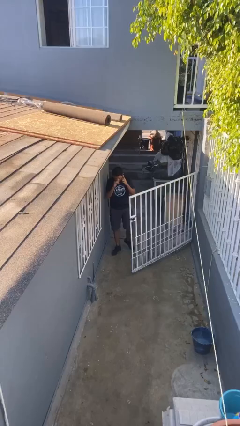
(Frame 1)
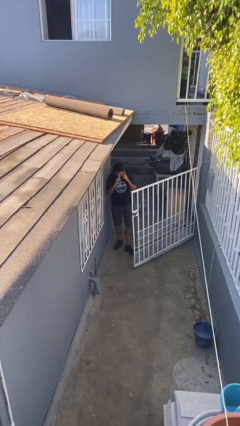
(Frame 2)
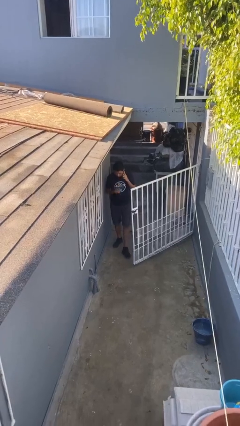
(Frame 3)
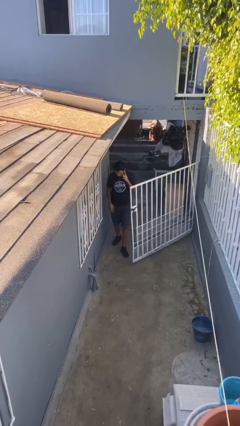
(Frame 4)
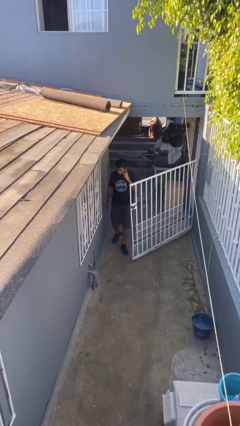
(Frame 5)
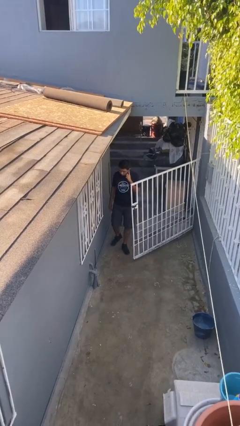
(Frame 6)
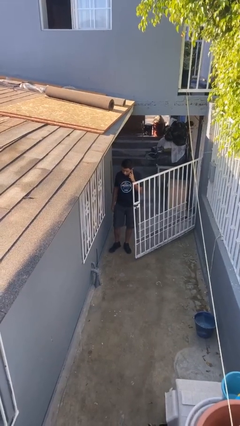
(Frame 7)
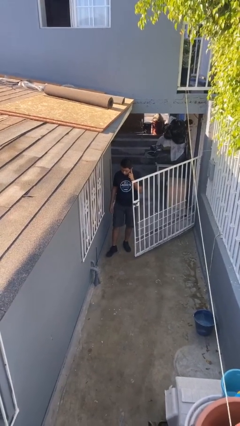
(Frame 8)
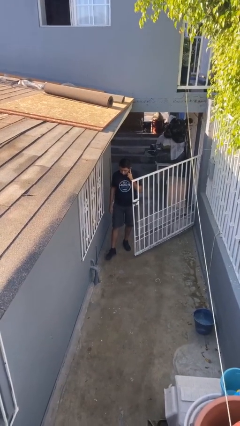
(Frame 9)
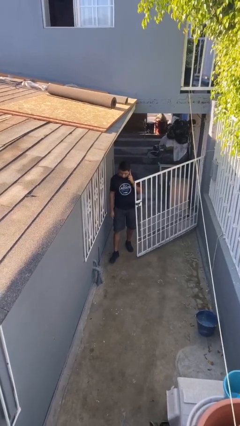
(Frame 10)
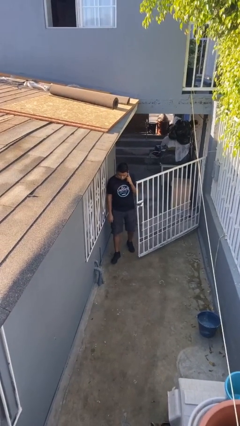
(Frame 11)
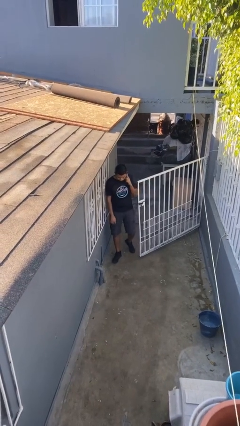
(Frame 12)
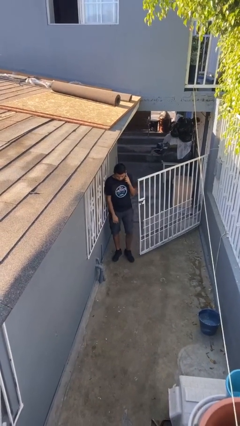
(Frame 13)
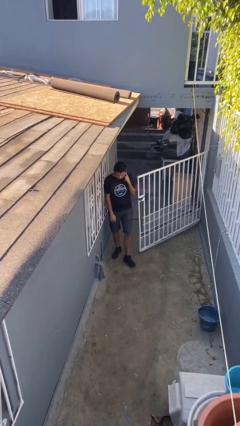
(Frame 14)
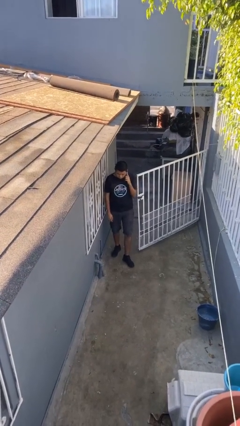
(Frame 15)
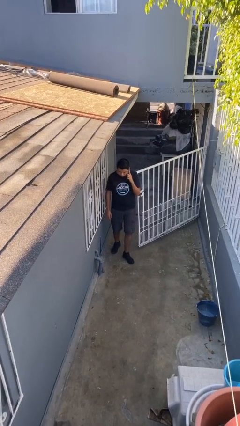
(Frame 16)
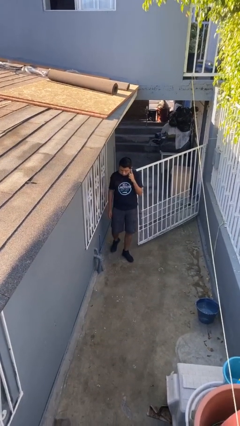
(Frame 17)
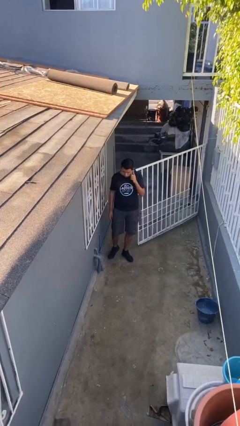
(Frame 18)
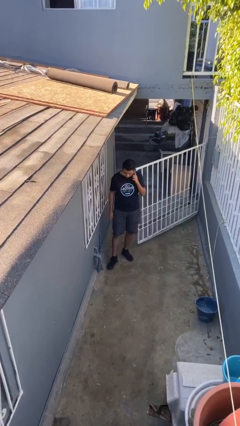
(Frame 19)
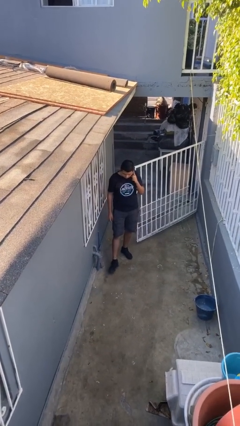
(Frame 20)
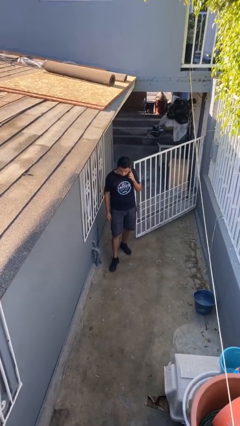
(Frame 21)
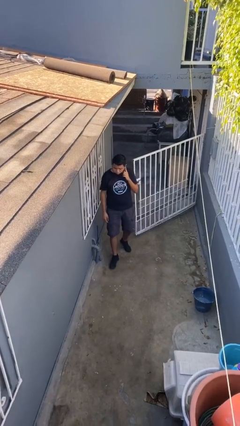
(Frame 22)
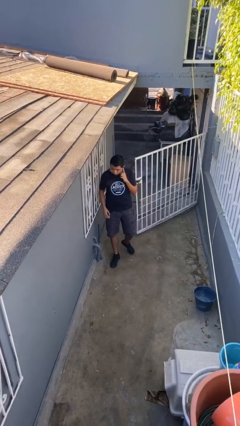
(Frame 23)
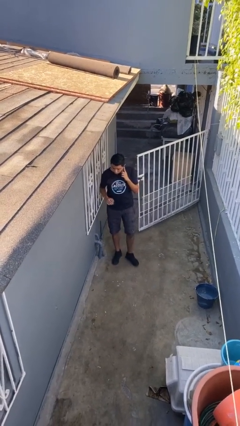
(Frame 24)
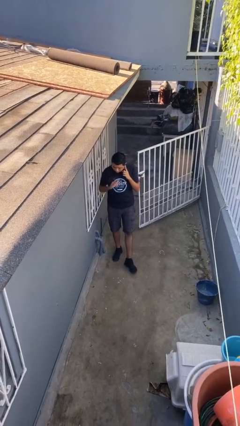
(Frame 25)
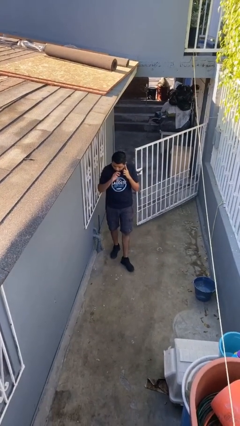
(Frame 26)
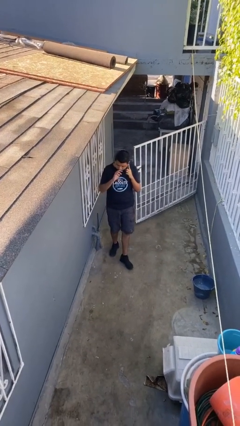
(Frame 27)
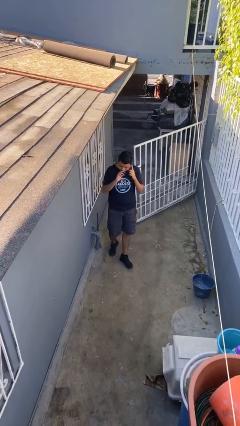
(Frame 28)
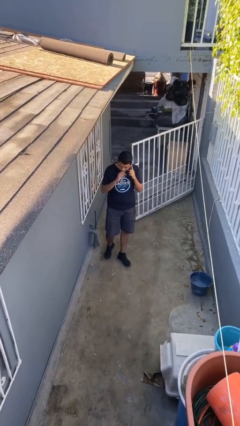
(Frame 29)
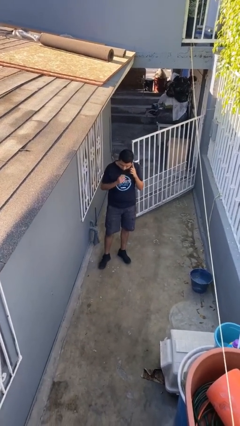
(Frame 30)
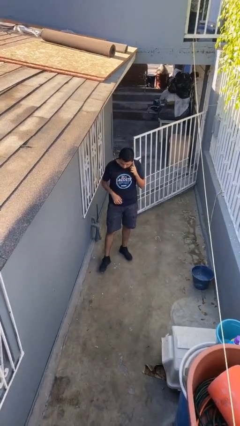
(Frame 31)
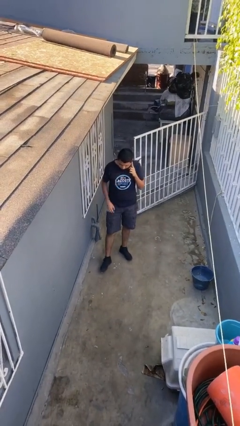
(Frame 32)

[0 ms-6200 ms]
person enters scene through structure

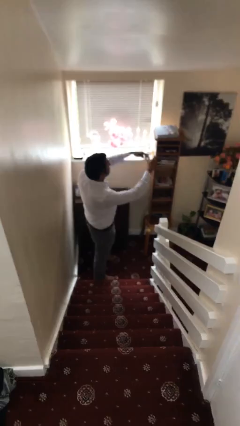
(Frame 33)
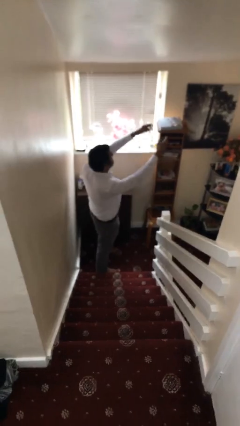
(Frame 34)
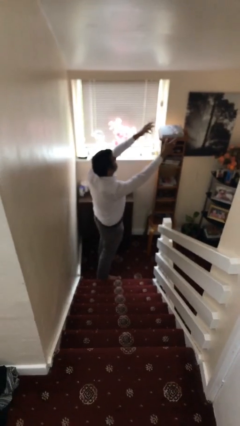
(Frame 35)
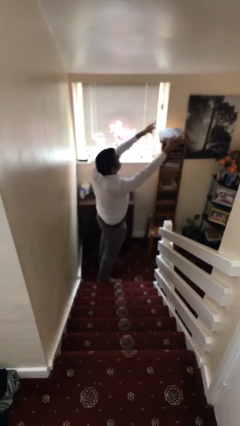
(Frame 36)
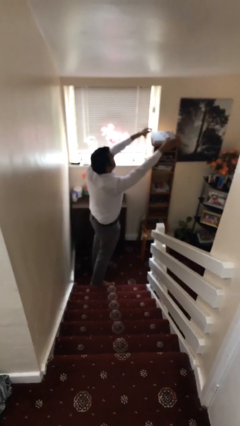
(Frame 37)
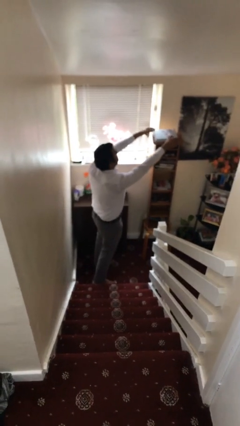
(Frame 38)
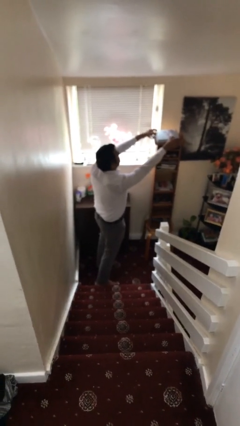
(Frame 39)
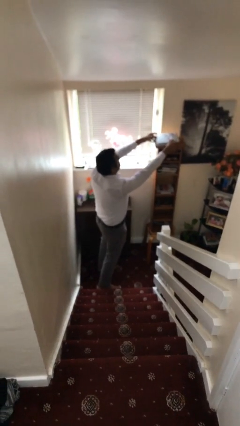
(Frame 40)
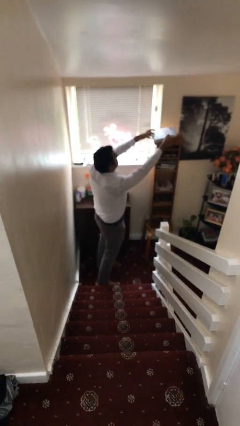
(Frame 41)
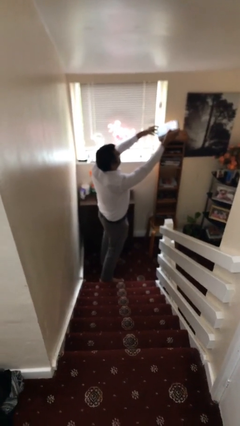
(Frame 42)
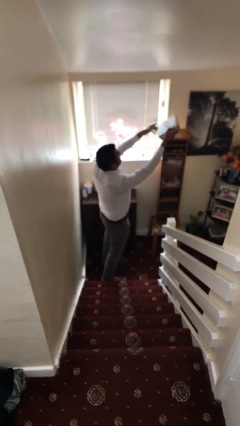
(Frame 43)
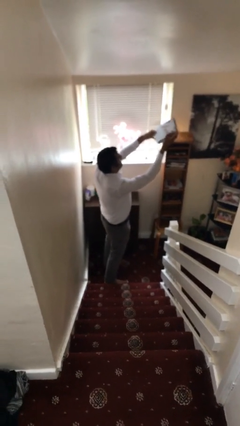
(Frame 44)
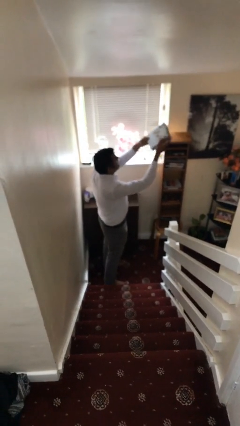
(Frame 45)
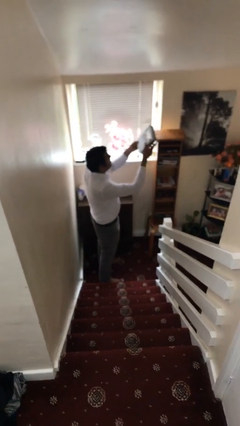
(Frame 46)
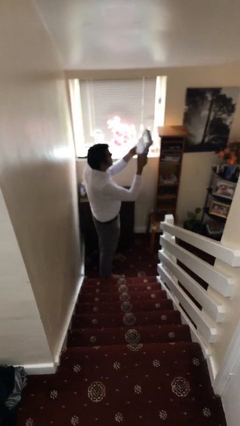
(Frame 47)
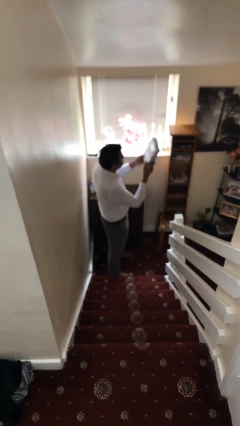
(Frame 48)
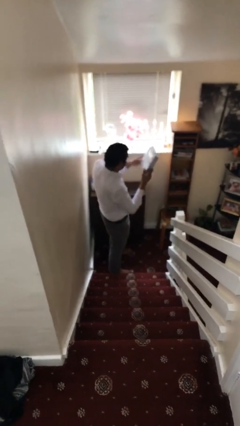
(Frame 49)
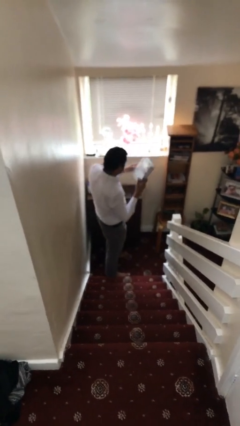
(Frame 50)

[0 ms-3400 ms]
person picks up object from shelf

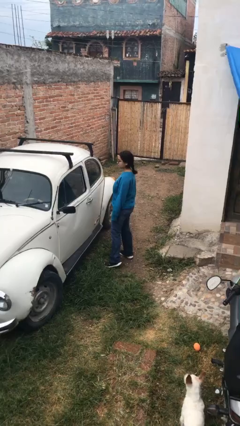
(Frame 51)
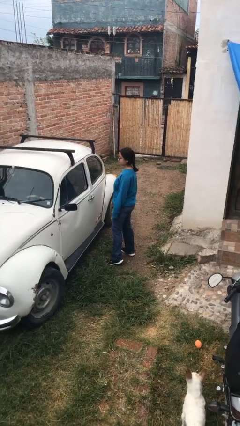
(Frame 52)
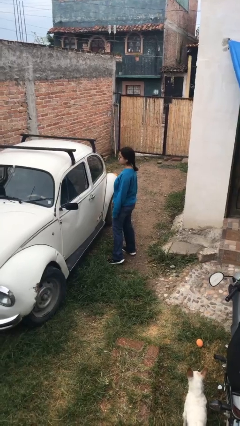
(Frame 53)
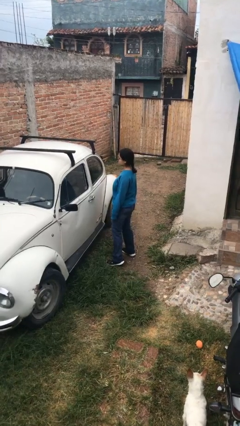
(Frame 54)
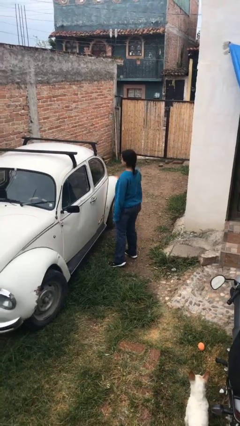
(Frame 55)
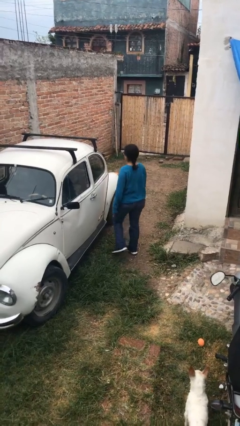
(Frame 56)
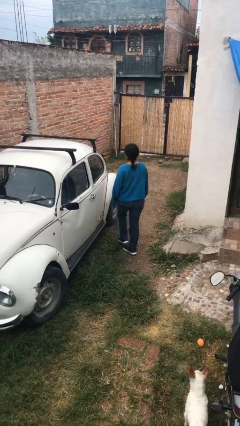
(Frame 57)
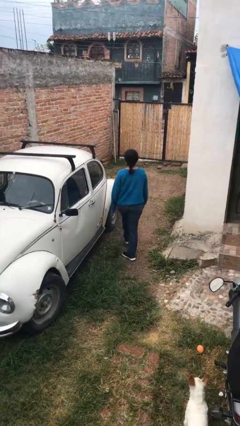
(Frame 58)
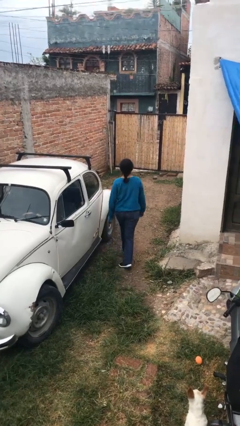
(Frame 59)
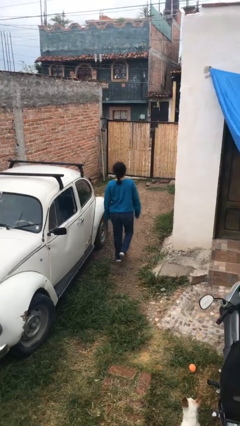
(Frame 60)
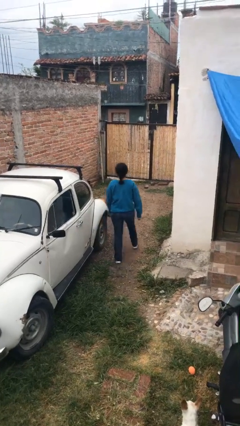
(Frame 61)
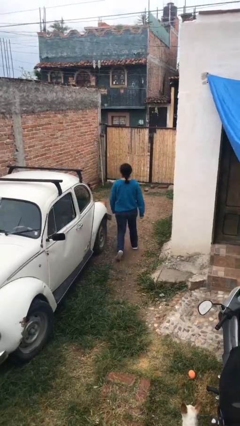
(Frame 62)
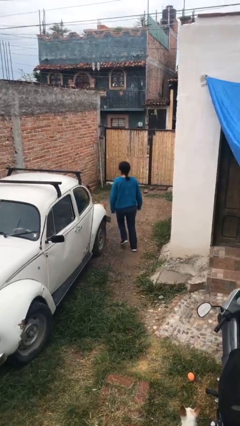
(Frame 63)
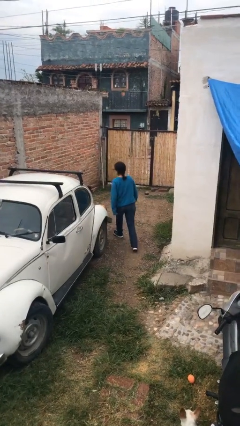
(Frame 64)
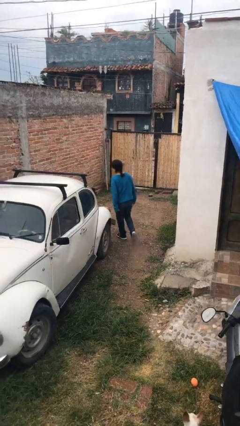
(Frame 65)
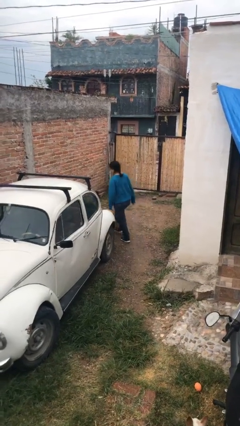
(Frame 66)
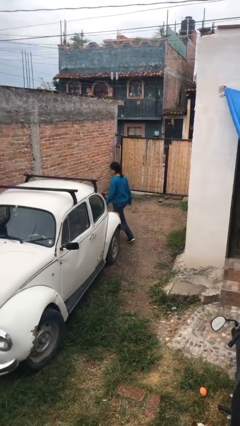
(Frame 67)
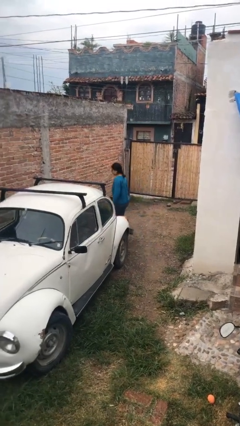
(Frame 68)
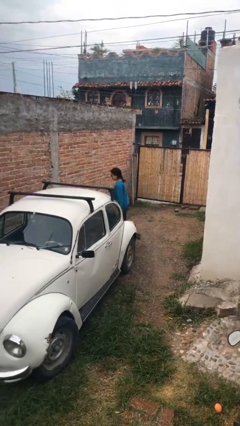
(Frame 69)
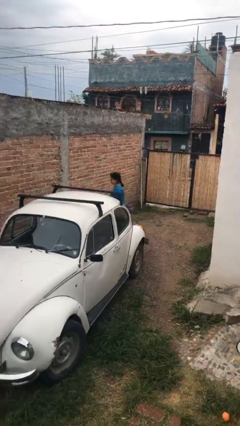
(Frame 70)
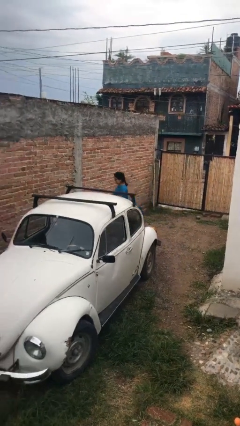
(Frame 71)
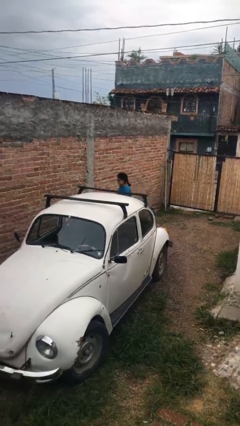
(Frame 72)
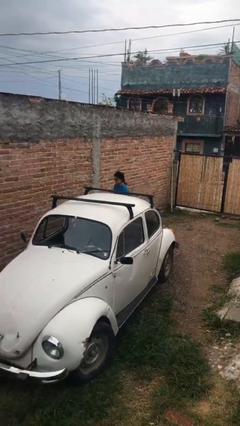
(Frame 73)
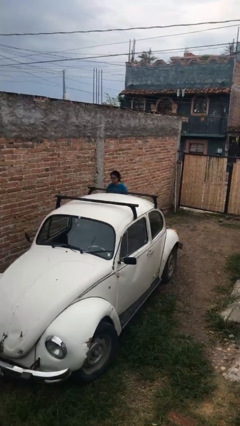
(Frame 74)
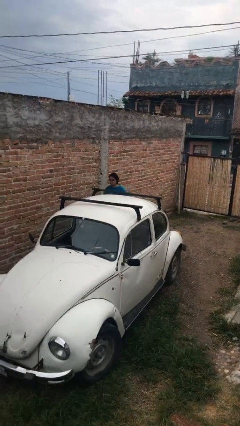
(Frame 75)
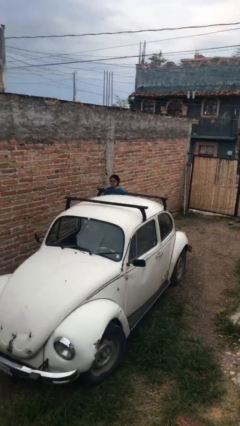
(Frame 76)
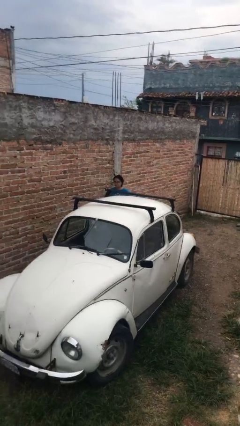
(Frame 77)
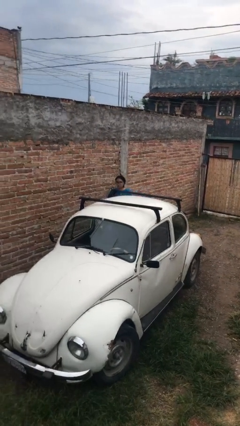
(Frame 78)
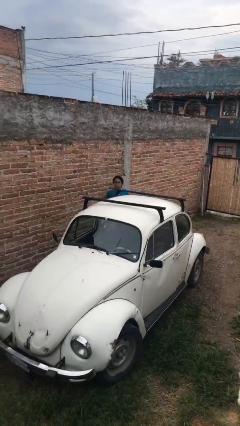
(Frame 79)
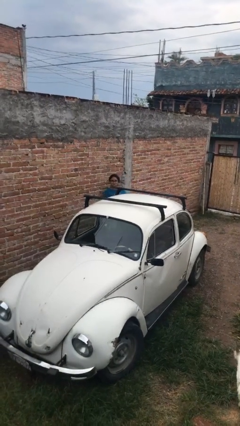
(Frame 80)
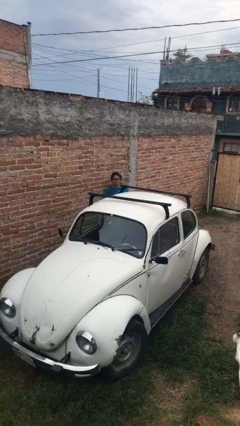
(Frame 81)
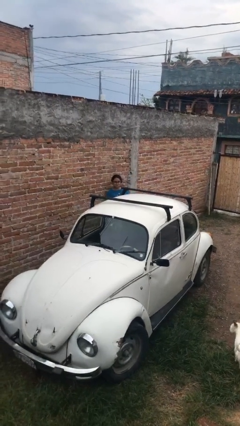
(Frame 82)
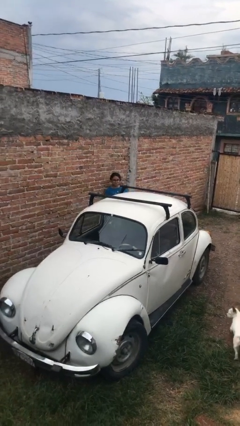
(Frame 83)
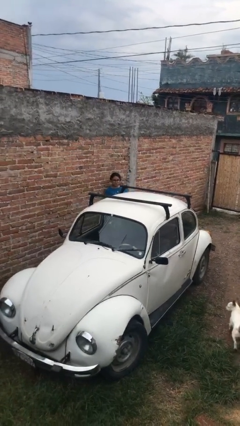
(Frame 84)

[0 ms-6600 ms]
person walks around car

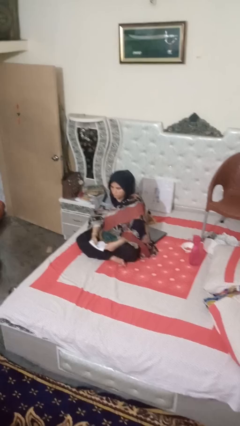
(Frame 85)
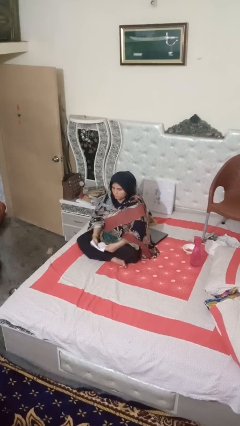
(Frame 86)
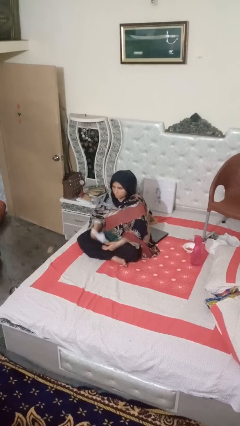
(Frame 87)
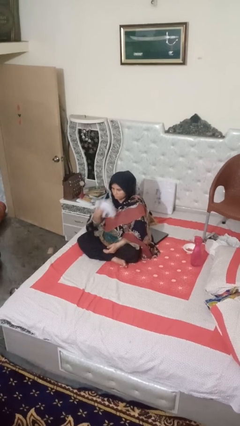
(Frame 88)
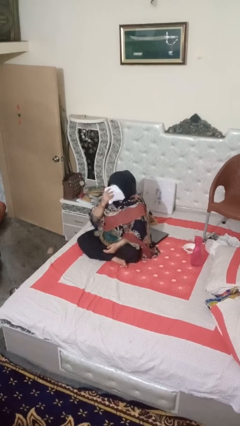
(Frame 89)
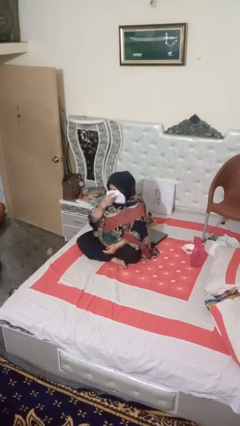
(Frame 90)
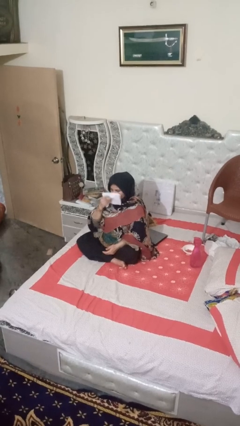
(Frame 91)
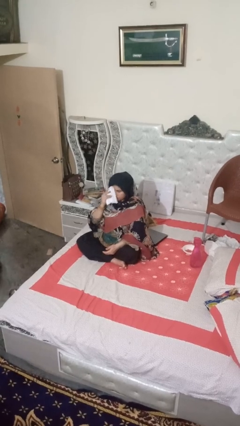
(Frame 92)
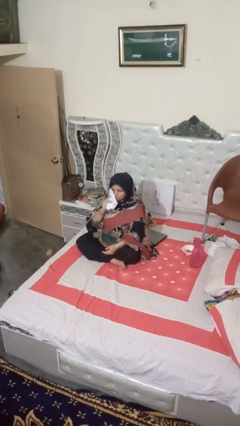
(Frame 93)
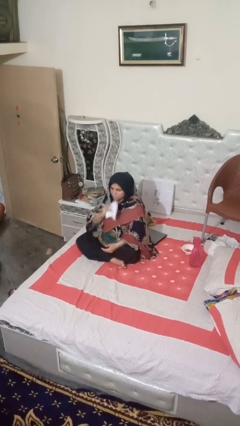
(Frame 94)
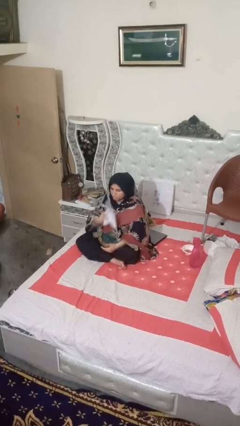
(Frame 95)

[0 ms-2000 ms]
person wipes mouth with napkin
